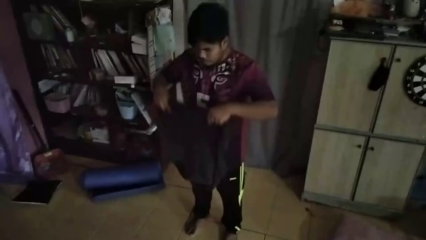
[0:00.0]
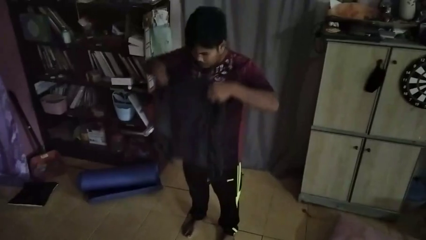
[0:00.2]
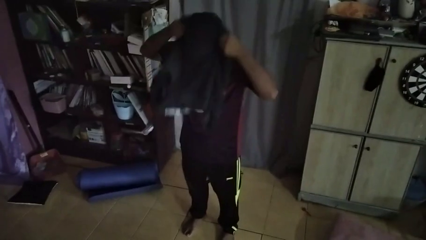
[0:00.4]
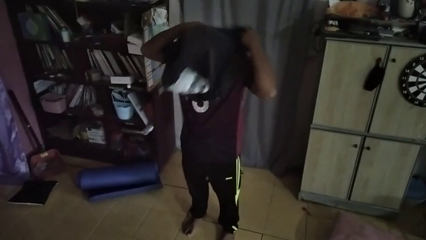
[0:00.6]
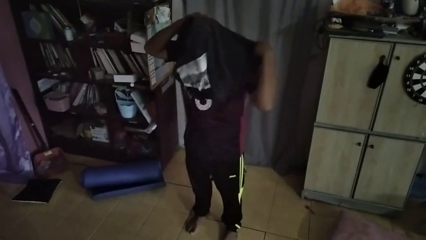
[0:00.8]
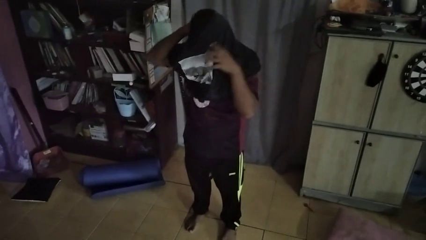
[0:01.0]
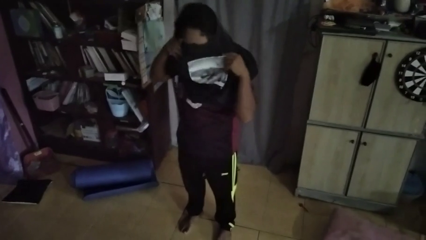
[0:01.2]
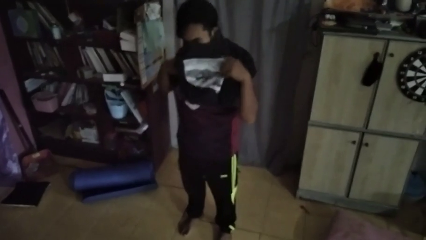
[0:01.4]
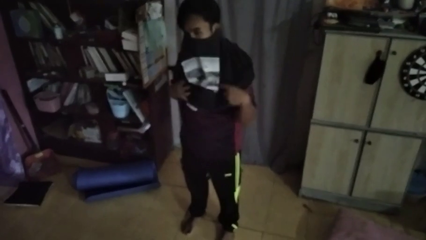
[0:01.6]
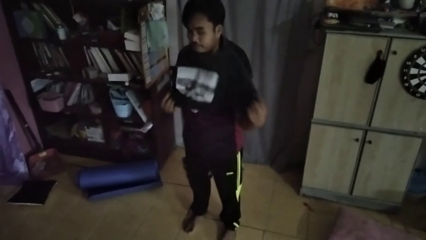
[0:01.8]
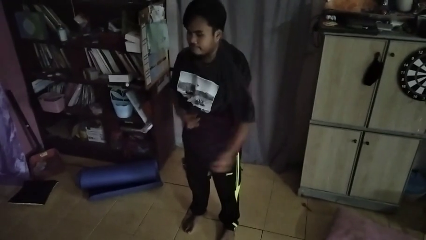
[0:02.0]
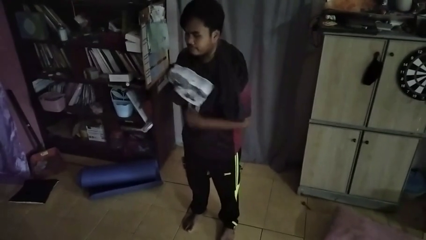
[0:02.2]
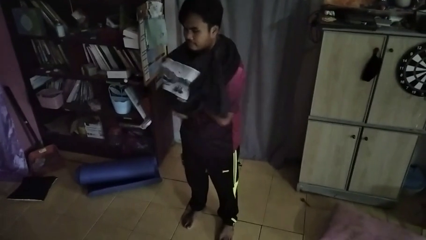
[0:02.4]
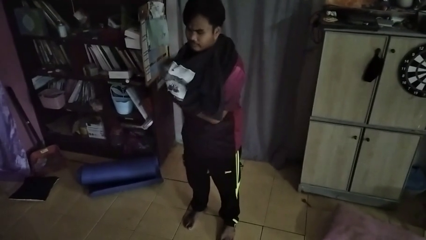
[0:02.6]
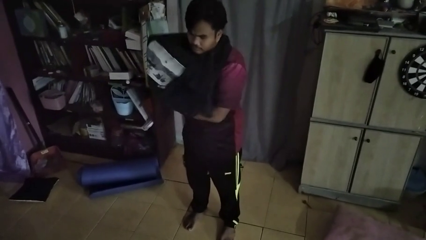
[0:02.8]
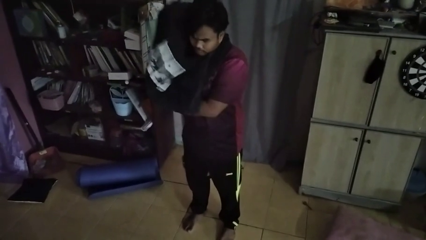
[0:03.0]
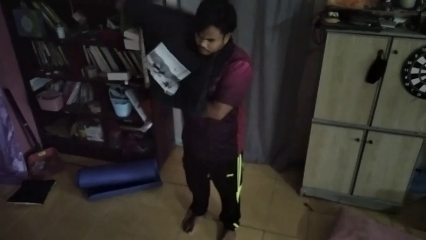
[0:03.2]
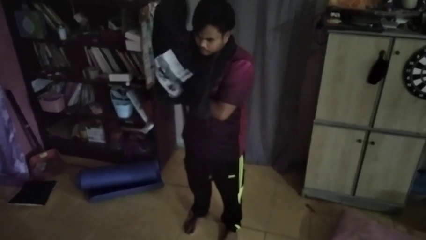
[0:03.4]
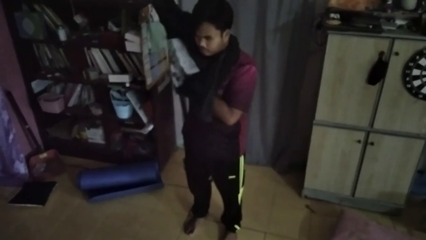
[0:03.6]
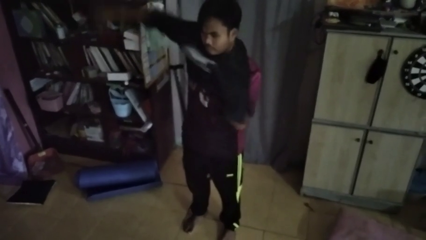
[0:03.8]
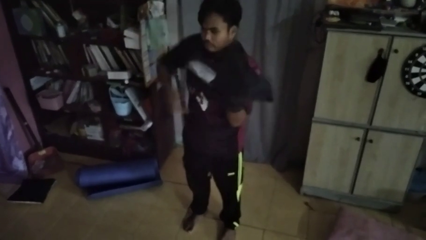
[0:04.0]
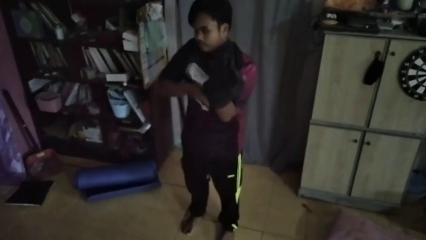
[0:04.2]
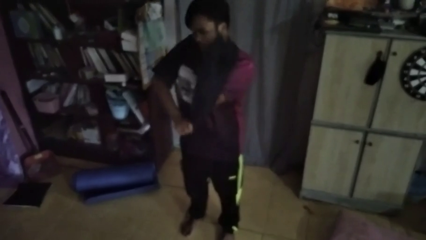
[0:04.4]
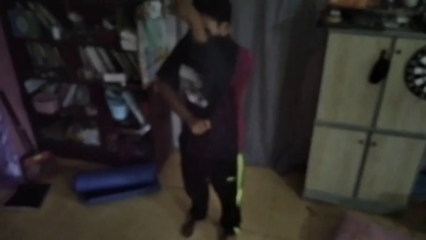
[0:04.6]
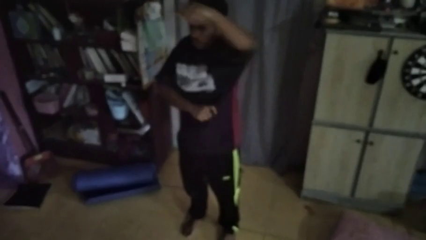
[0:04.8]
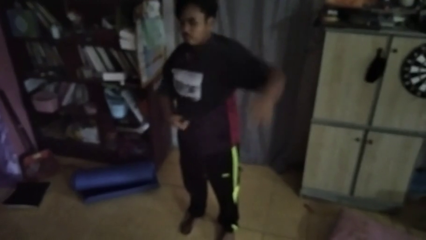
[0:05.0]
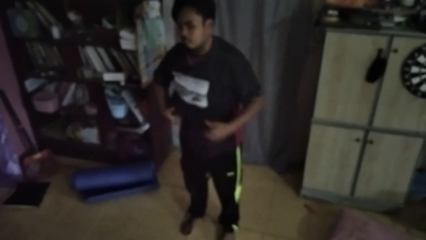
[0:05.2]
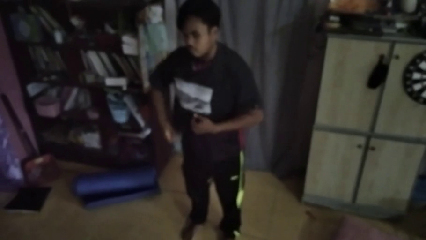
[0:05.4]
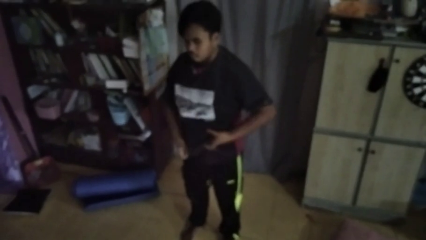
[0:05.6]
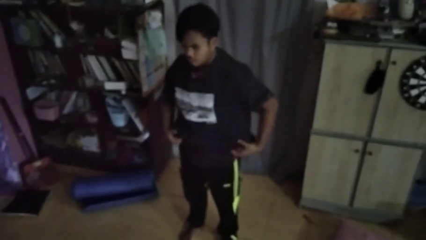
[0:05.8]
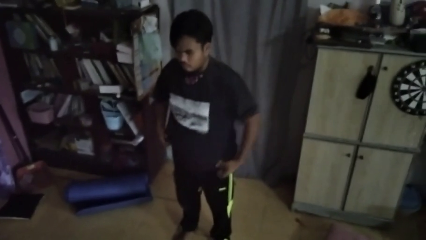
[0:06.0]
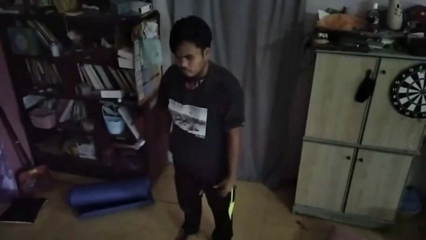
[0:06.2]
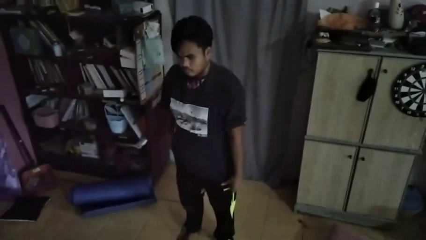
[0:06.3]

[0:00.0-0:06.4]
person puts on shirt

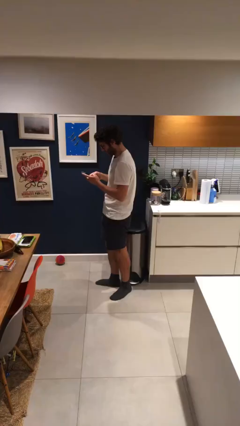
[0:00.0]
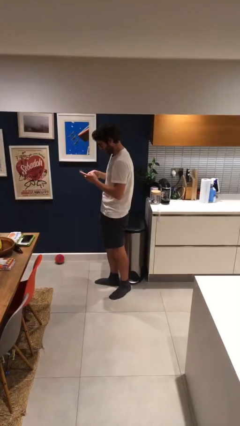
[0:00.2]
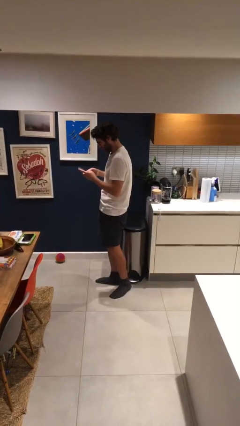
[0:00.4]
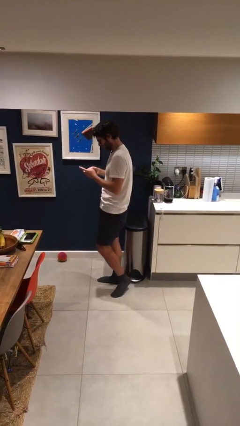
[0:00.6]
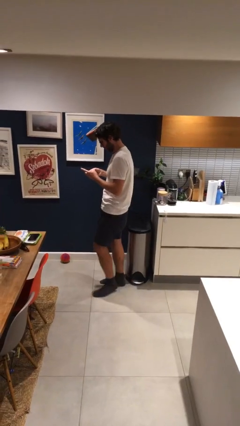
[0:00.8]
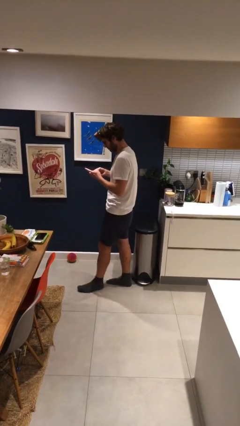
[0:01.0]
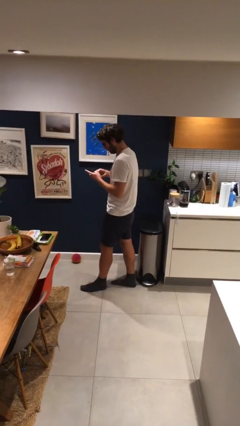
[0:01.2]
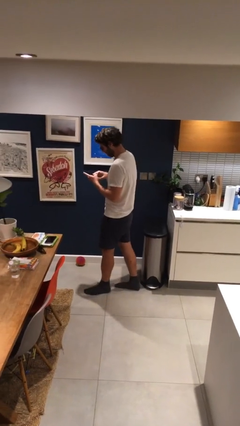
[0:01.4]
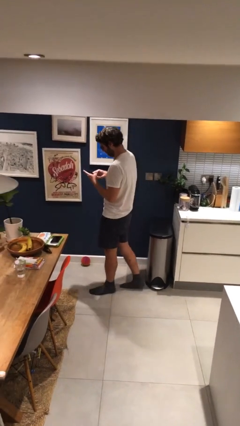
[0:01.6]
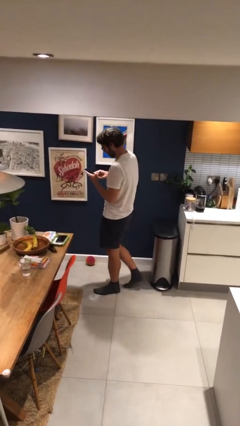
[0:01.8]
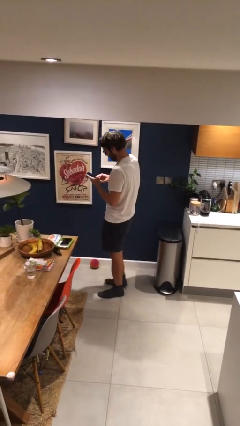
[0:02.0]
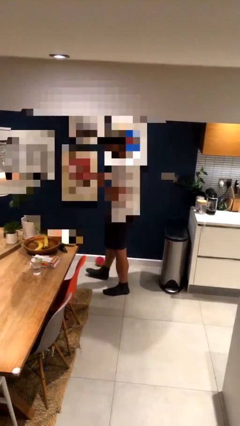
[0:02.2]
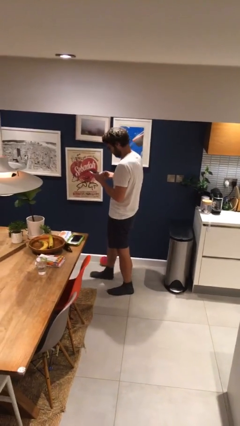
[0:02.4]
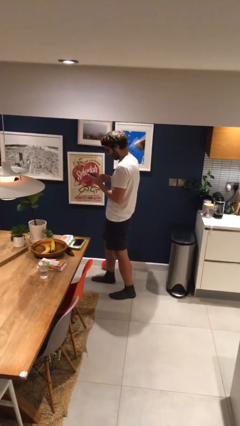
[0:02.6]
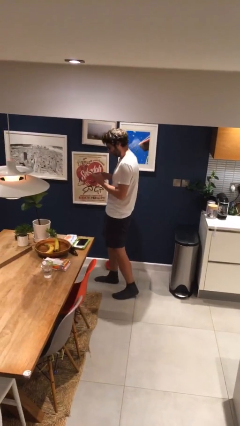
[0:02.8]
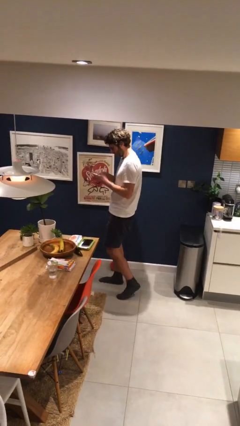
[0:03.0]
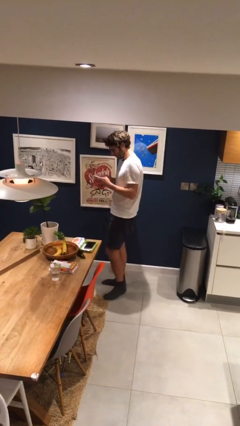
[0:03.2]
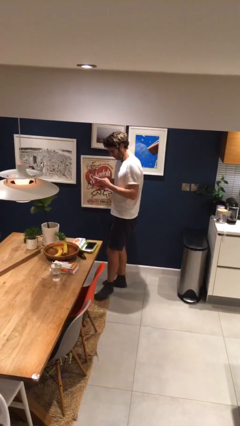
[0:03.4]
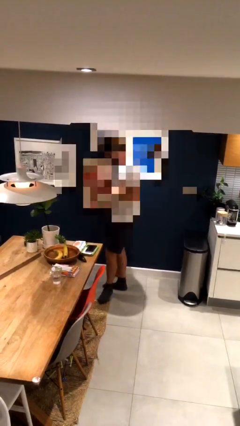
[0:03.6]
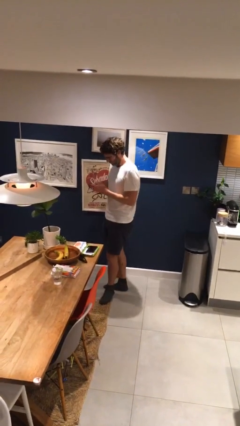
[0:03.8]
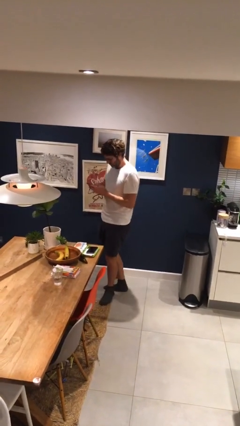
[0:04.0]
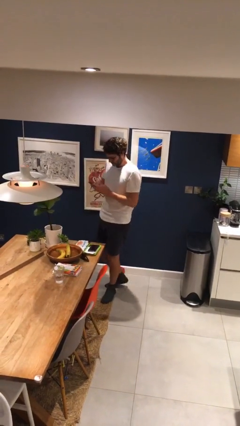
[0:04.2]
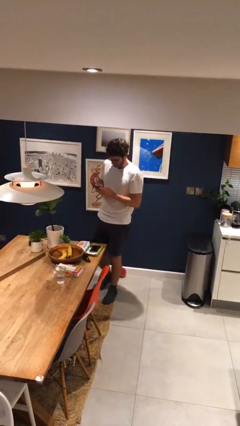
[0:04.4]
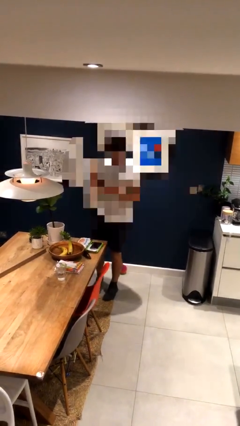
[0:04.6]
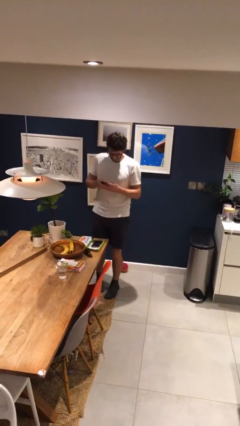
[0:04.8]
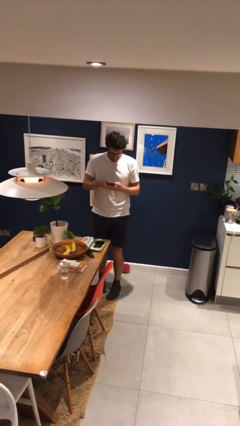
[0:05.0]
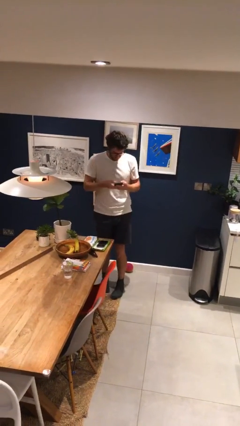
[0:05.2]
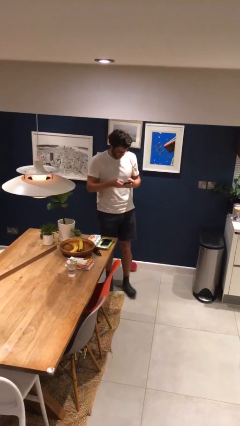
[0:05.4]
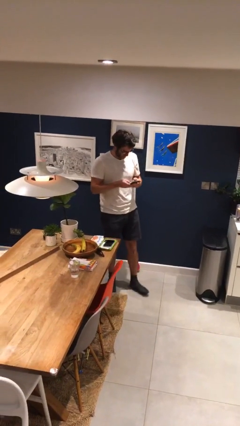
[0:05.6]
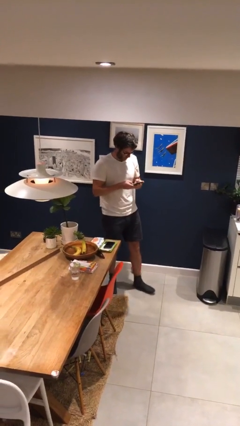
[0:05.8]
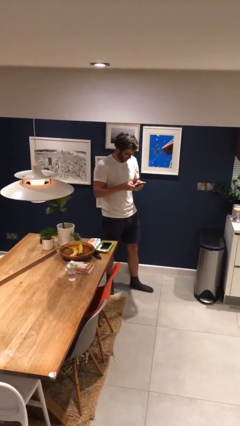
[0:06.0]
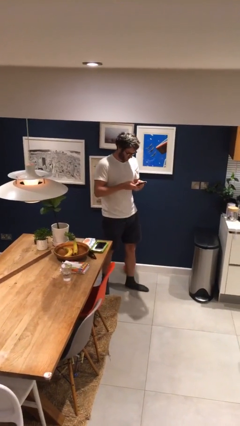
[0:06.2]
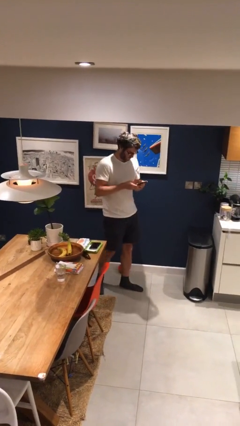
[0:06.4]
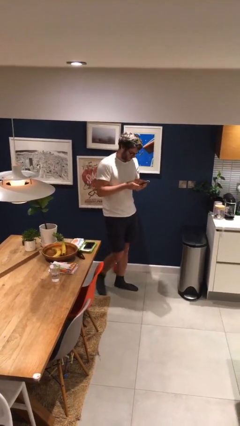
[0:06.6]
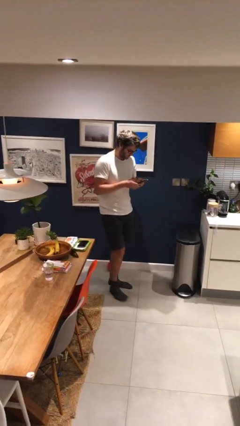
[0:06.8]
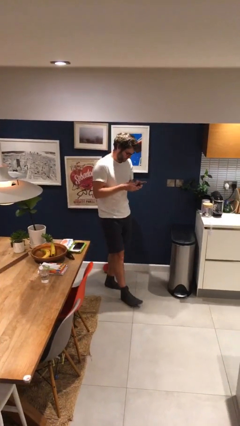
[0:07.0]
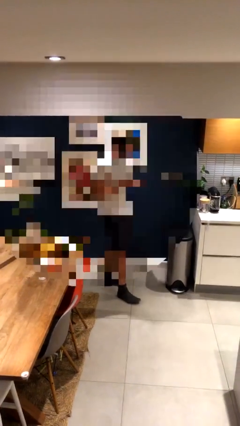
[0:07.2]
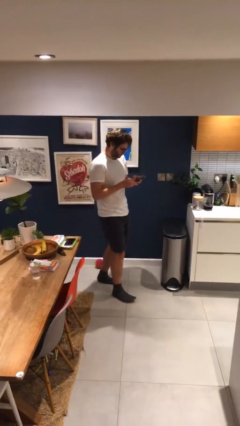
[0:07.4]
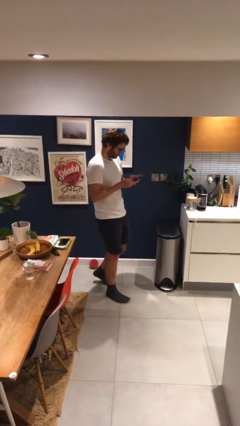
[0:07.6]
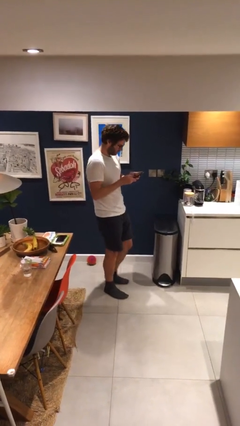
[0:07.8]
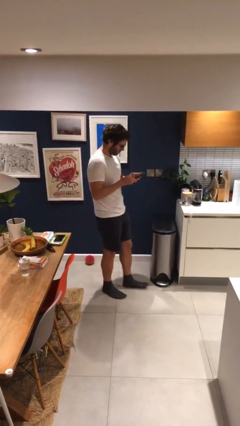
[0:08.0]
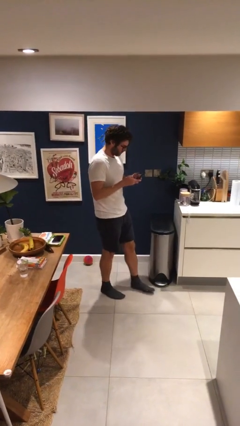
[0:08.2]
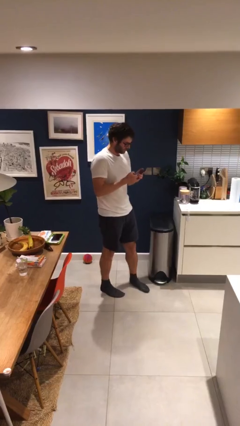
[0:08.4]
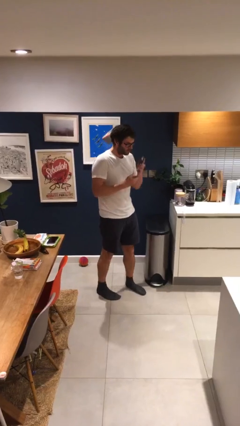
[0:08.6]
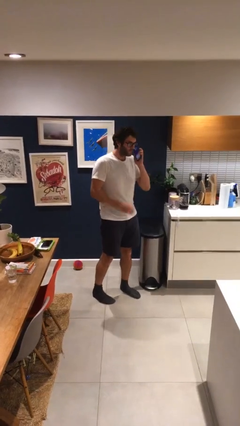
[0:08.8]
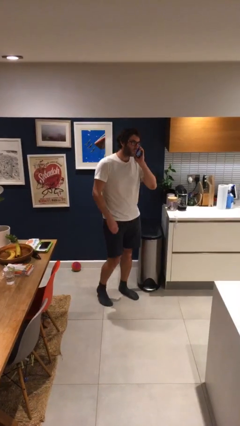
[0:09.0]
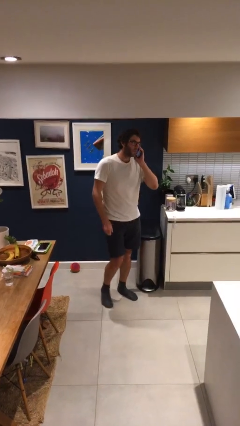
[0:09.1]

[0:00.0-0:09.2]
person texts on phone

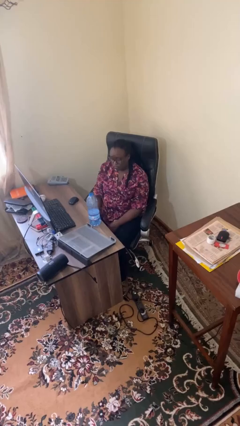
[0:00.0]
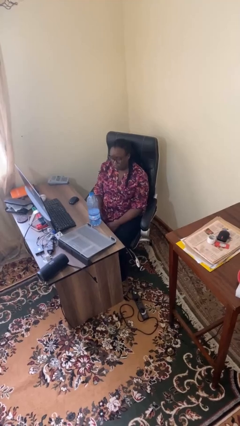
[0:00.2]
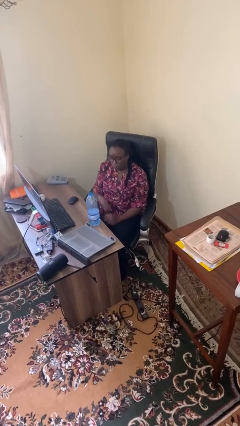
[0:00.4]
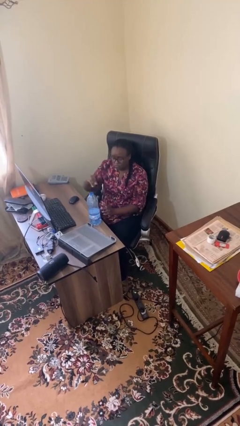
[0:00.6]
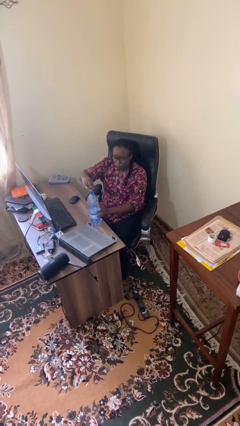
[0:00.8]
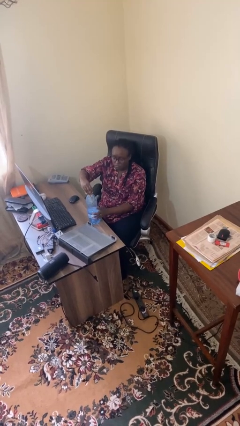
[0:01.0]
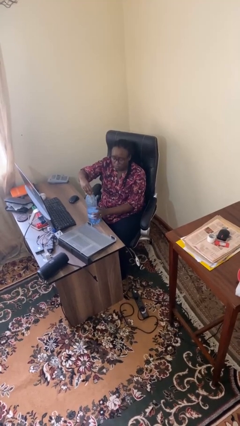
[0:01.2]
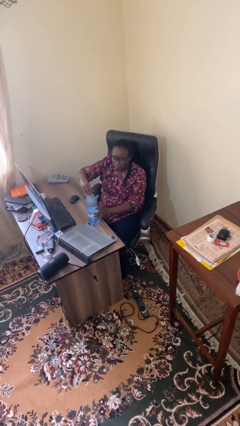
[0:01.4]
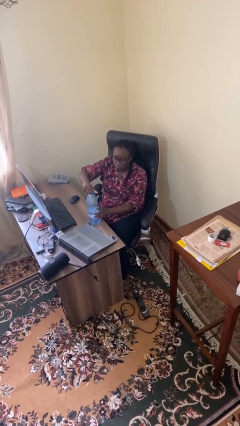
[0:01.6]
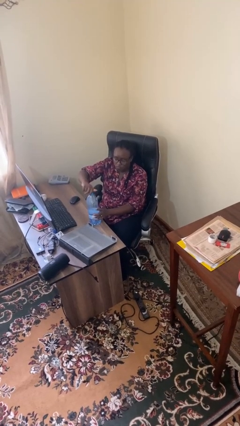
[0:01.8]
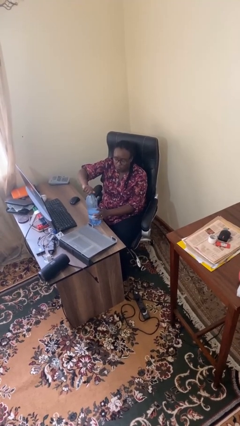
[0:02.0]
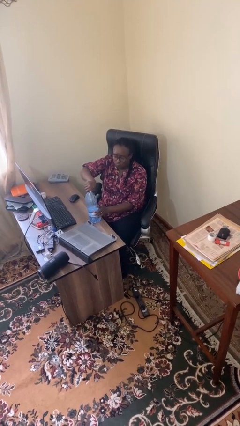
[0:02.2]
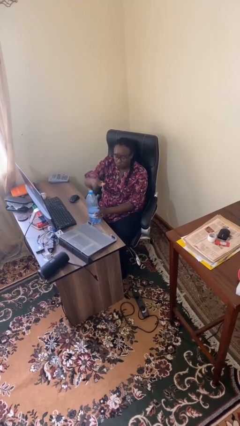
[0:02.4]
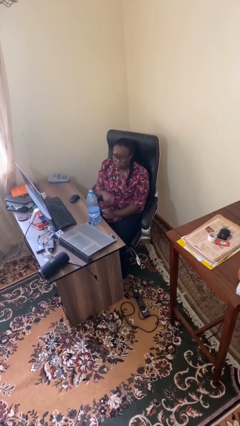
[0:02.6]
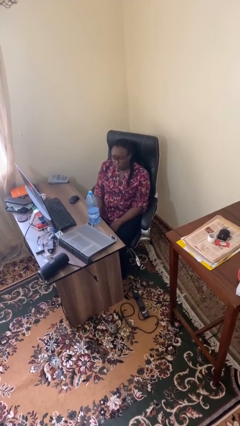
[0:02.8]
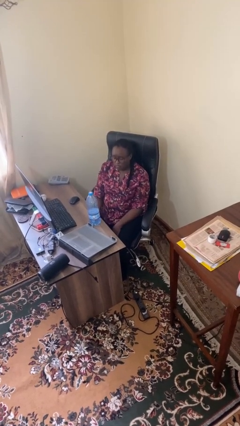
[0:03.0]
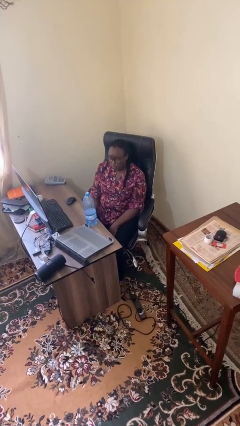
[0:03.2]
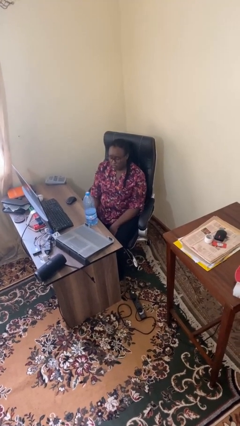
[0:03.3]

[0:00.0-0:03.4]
person screws lid to bottle
